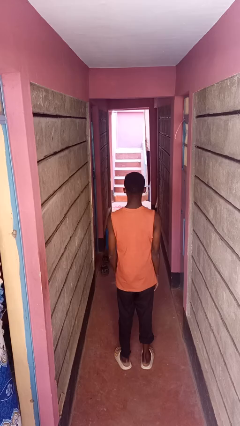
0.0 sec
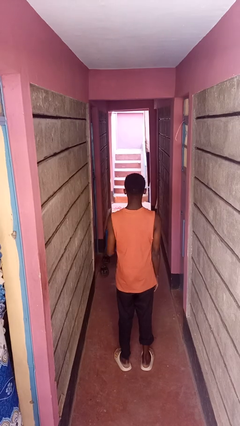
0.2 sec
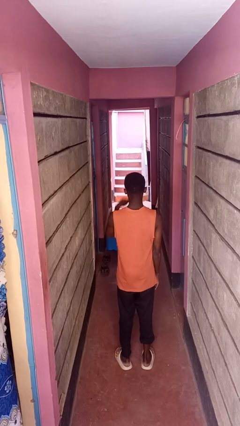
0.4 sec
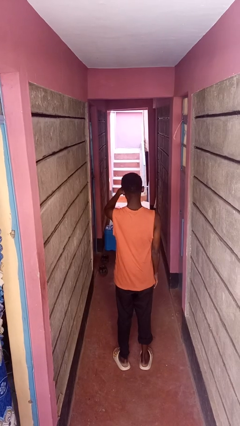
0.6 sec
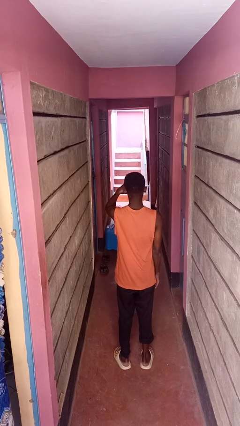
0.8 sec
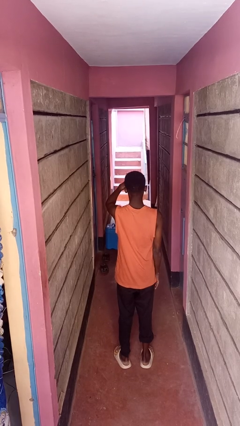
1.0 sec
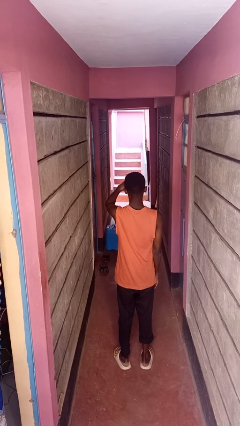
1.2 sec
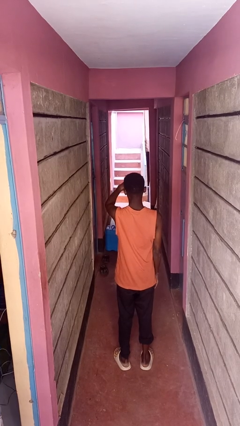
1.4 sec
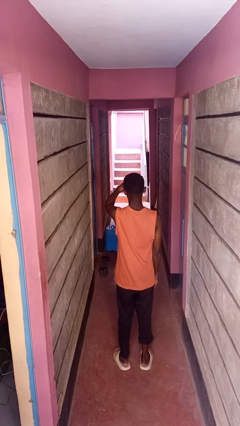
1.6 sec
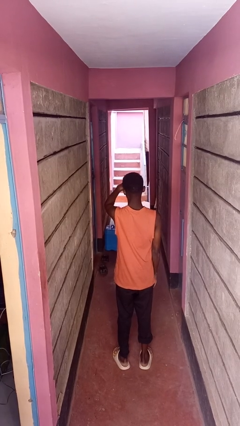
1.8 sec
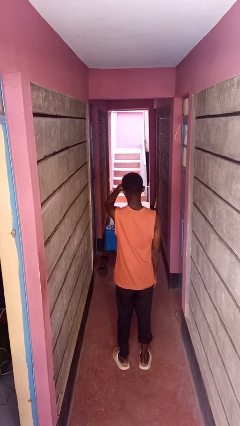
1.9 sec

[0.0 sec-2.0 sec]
person rubs eyes

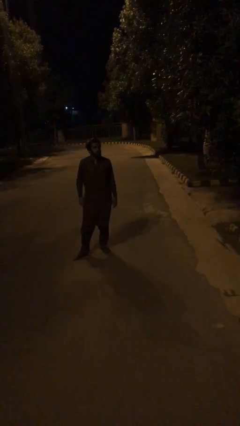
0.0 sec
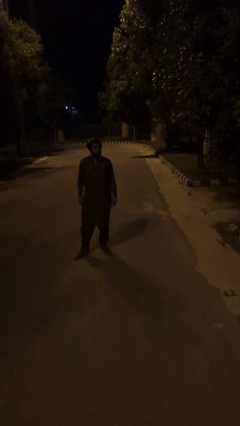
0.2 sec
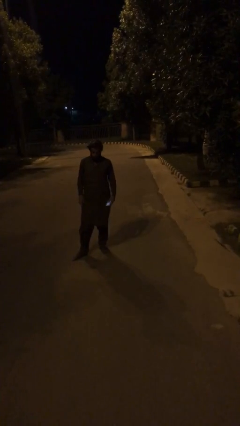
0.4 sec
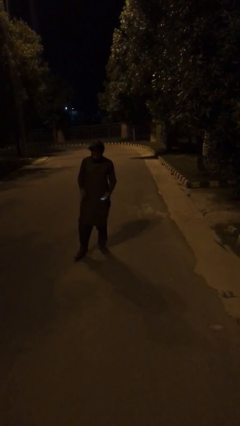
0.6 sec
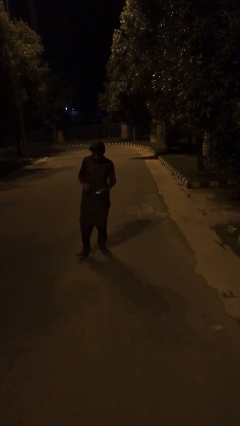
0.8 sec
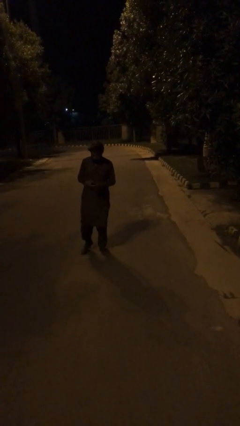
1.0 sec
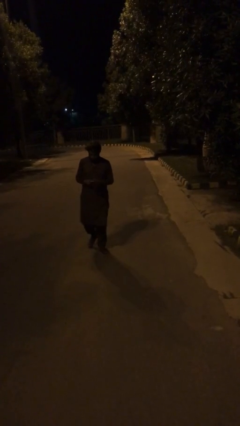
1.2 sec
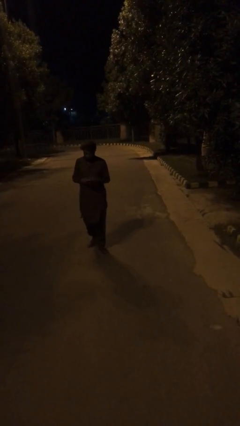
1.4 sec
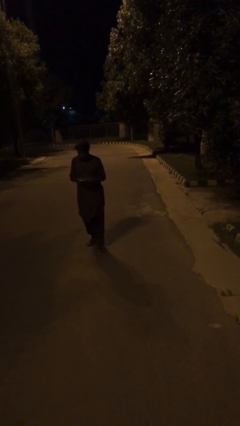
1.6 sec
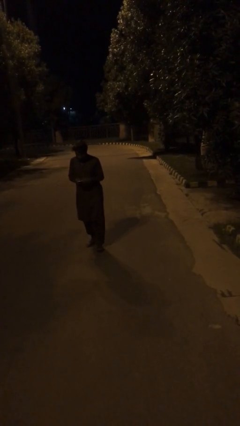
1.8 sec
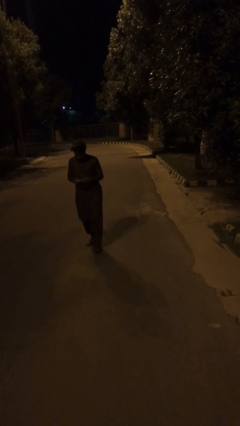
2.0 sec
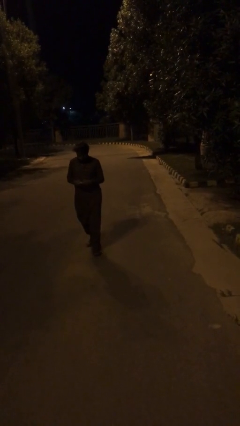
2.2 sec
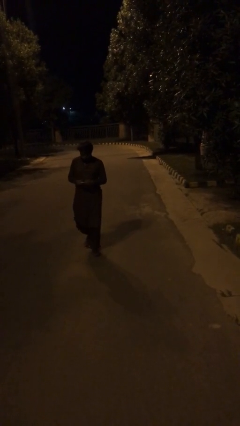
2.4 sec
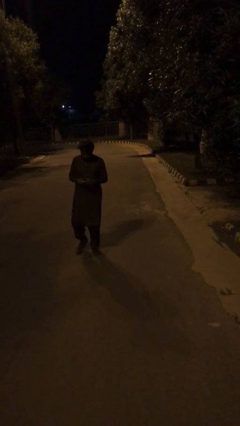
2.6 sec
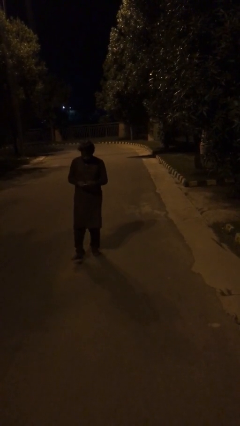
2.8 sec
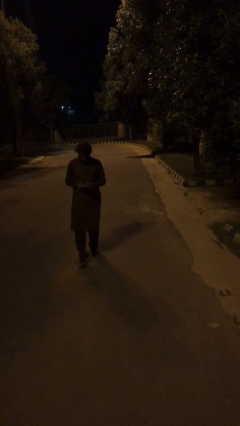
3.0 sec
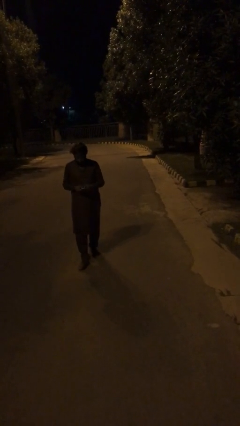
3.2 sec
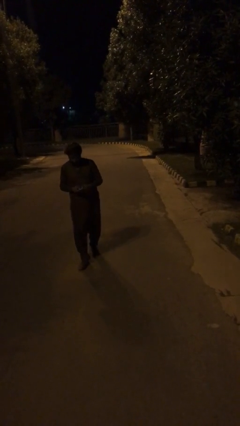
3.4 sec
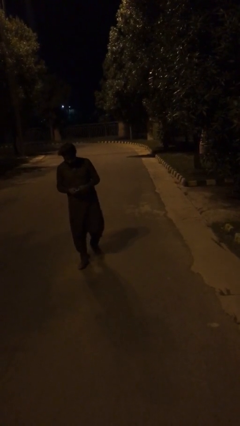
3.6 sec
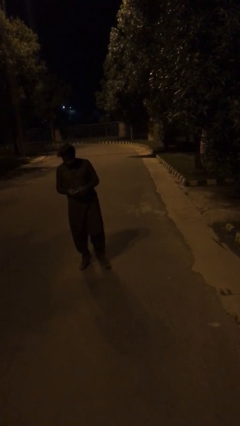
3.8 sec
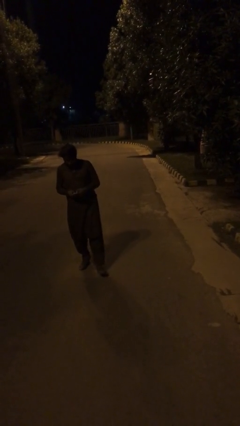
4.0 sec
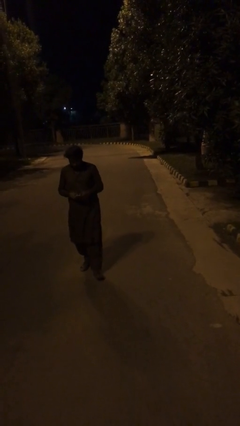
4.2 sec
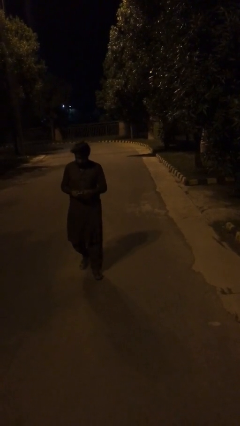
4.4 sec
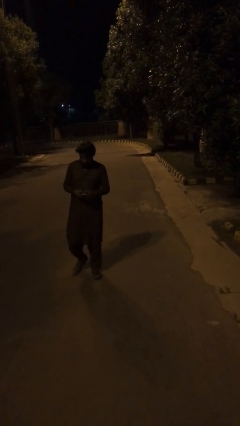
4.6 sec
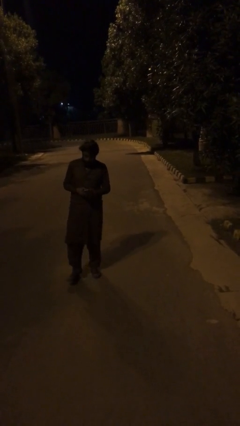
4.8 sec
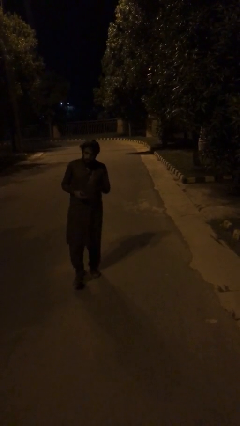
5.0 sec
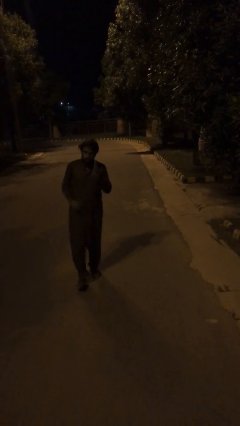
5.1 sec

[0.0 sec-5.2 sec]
person texts on phone

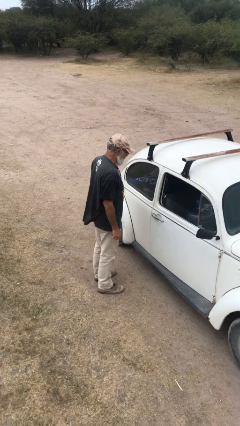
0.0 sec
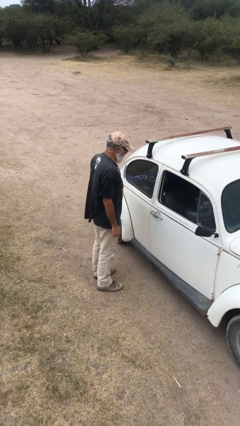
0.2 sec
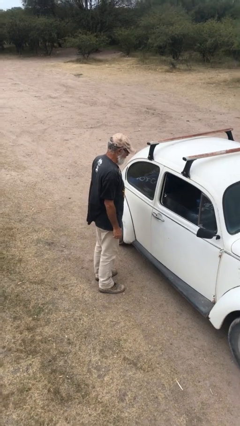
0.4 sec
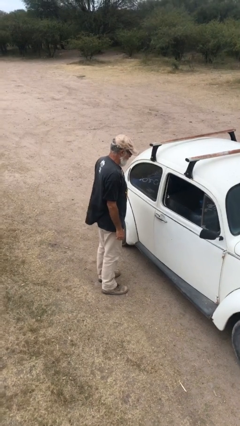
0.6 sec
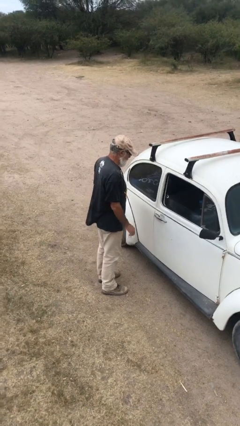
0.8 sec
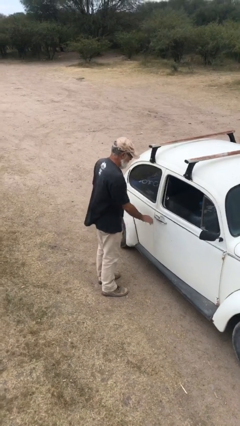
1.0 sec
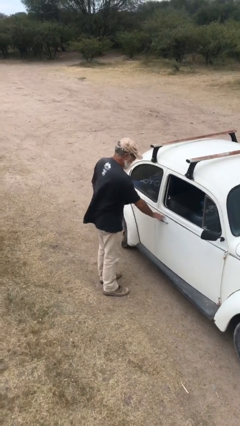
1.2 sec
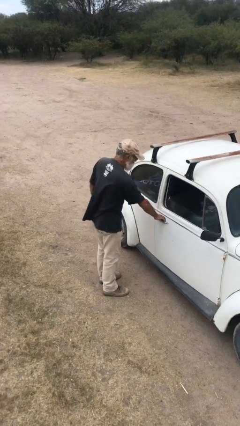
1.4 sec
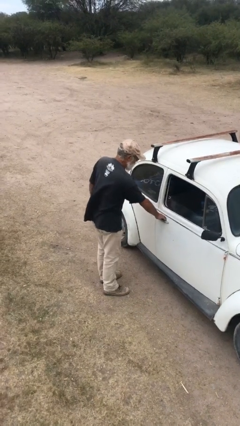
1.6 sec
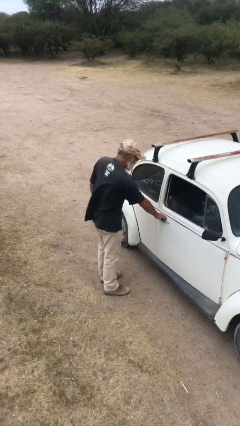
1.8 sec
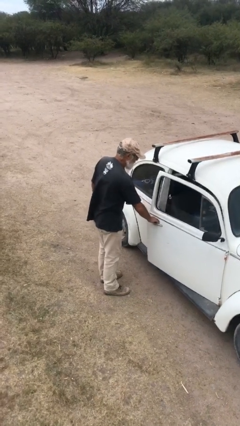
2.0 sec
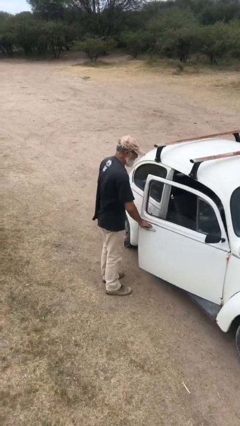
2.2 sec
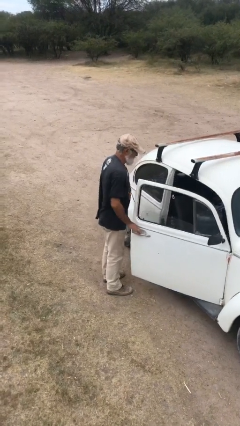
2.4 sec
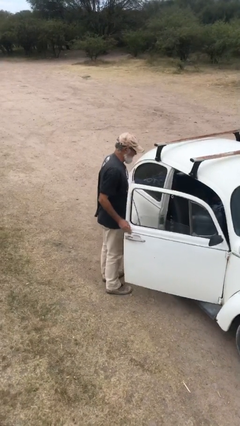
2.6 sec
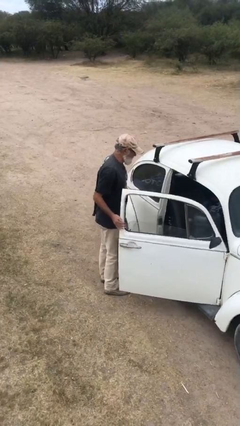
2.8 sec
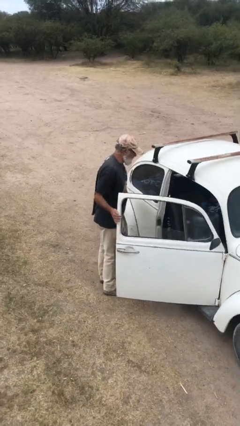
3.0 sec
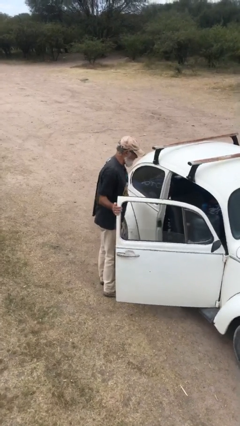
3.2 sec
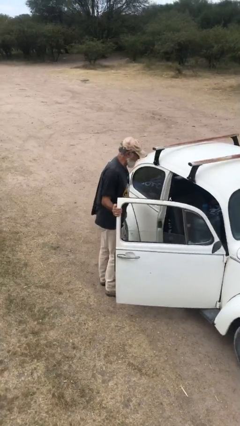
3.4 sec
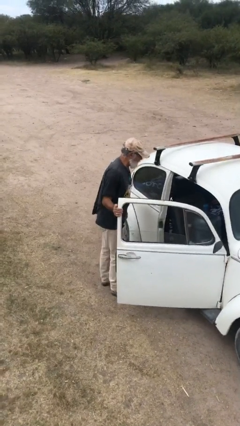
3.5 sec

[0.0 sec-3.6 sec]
person opens car door

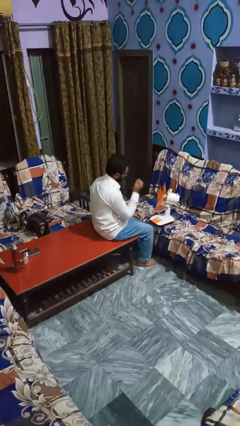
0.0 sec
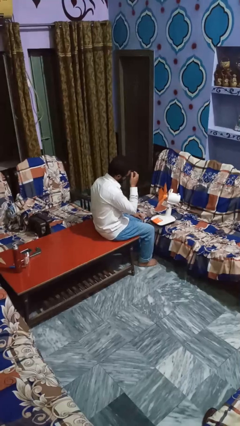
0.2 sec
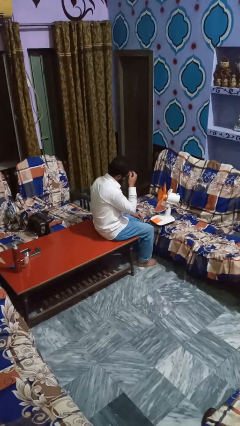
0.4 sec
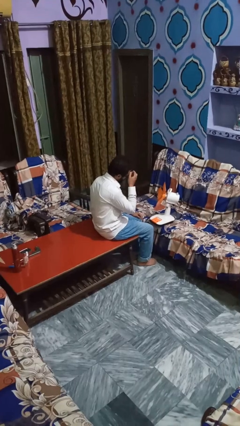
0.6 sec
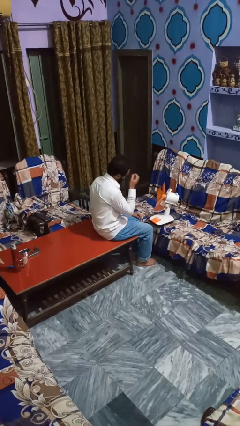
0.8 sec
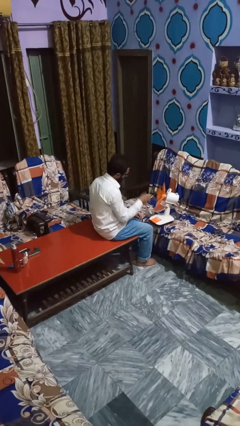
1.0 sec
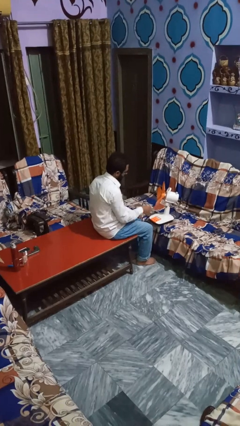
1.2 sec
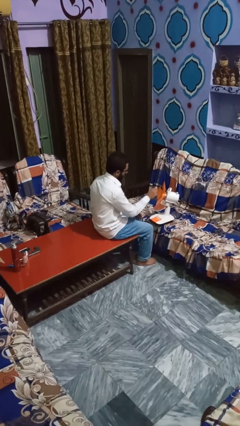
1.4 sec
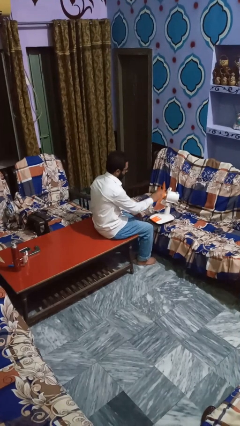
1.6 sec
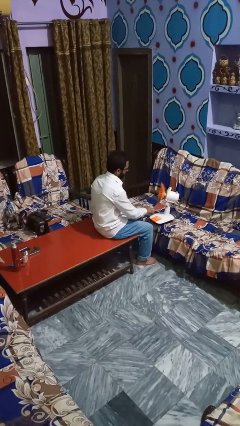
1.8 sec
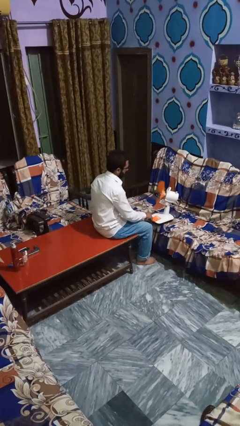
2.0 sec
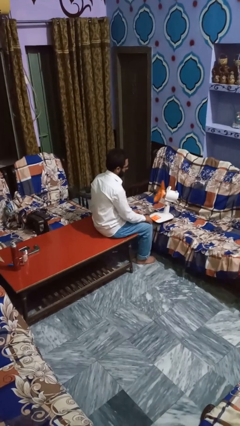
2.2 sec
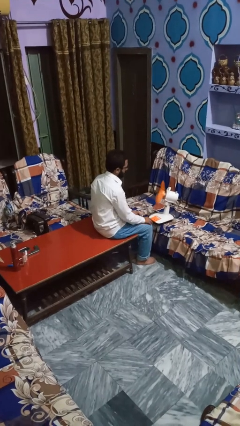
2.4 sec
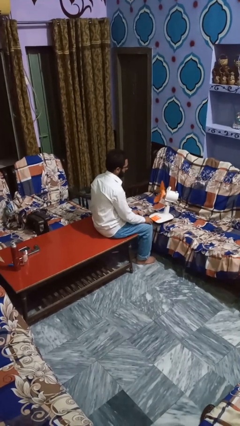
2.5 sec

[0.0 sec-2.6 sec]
person turns on fan

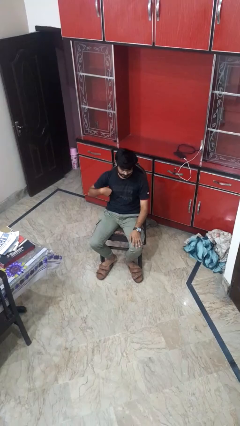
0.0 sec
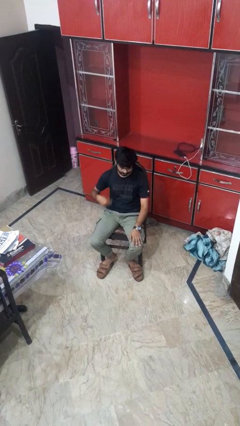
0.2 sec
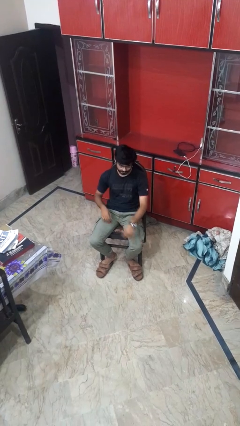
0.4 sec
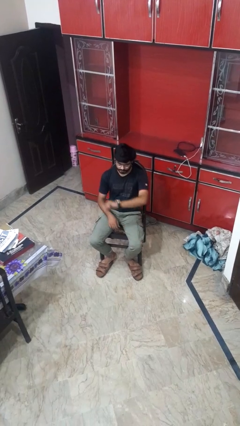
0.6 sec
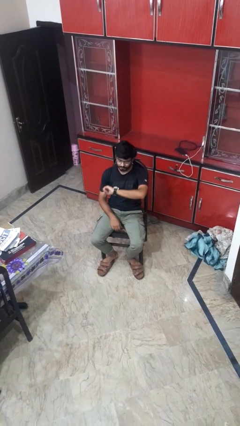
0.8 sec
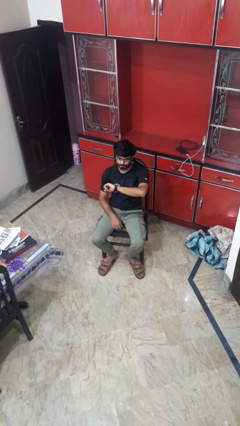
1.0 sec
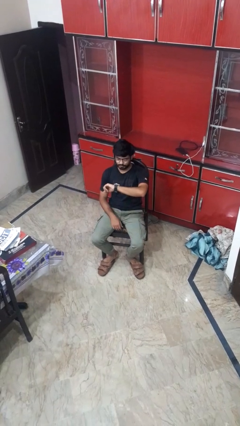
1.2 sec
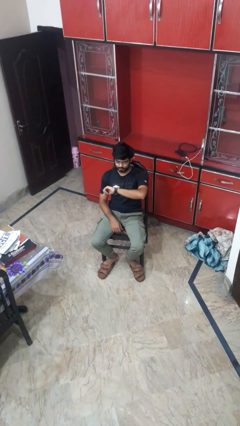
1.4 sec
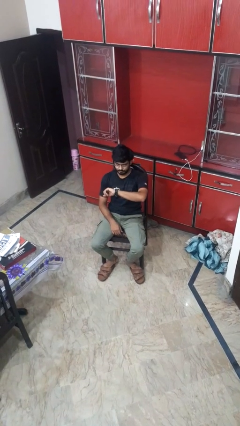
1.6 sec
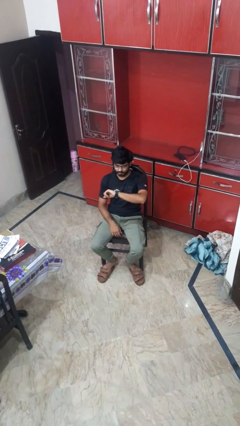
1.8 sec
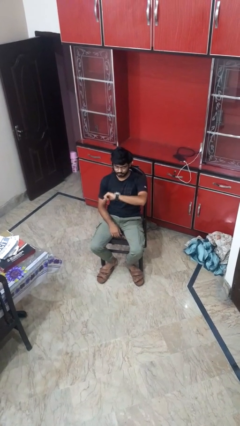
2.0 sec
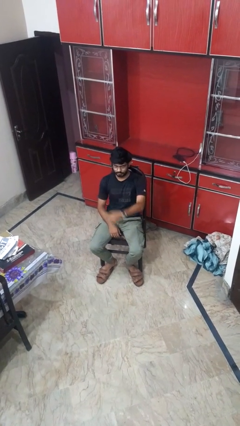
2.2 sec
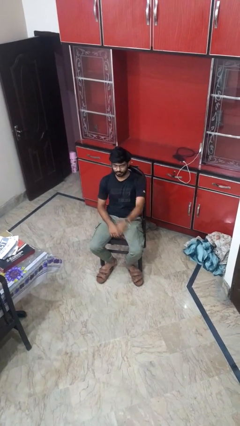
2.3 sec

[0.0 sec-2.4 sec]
person looks at wristwatch

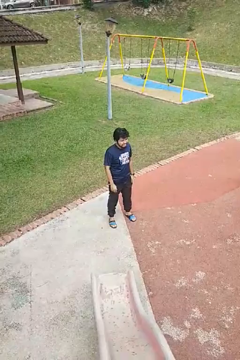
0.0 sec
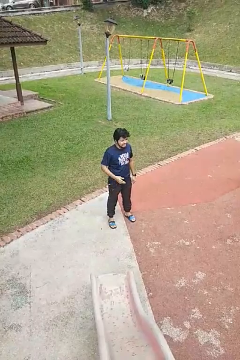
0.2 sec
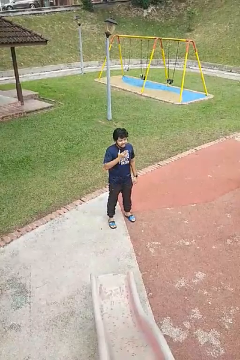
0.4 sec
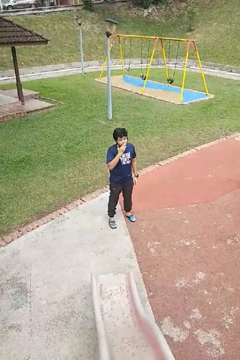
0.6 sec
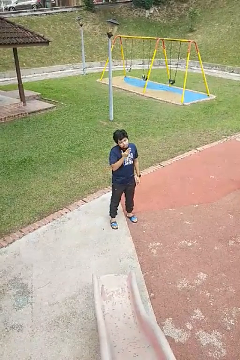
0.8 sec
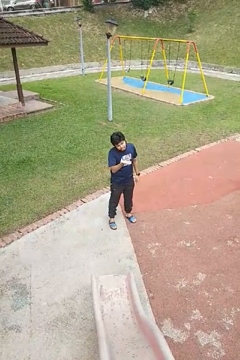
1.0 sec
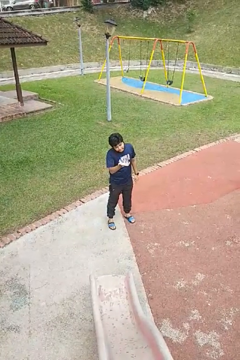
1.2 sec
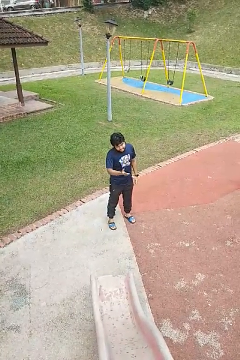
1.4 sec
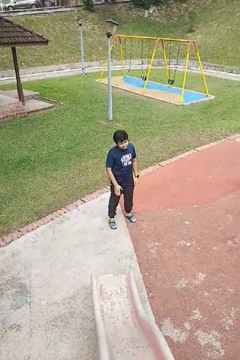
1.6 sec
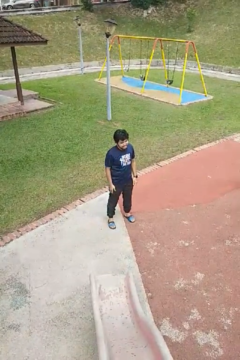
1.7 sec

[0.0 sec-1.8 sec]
person gestures blow kiss
